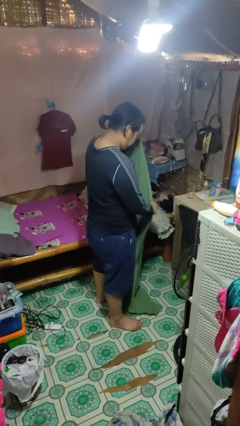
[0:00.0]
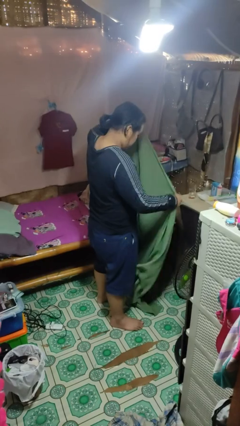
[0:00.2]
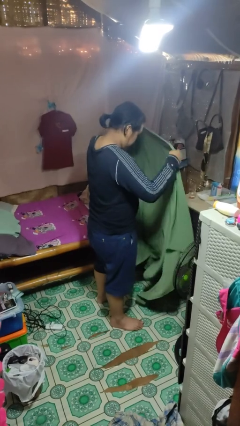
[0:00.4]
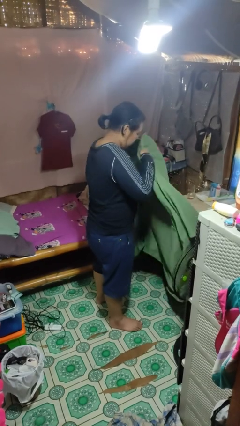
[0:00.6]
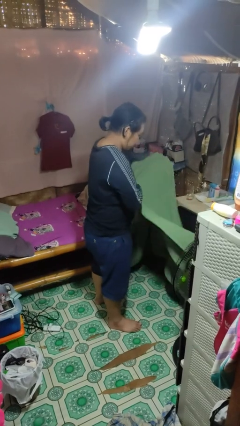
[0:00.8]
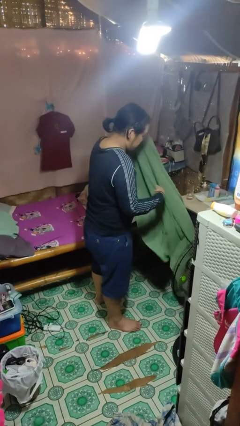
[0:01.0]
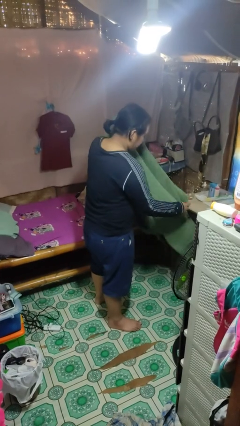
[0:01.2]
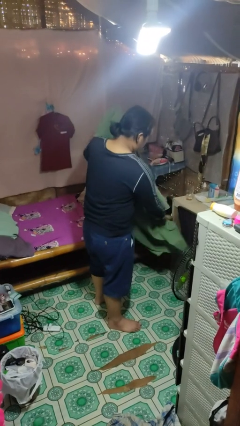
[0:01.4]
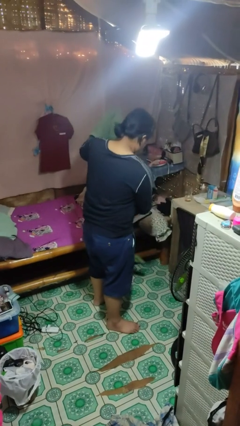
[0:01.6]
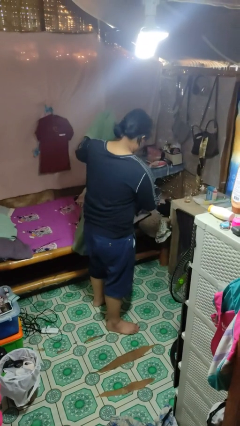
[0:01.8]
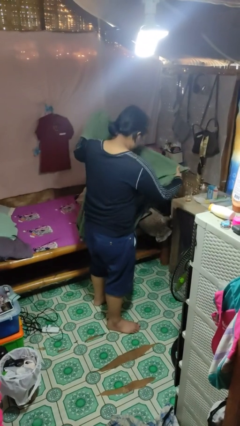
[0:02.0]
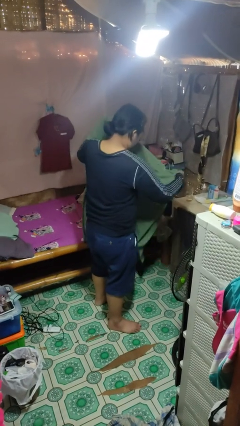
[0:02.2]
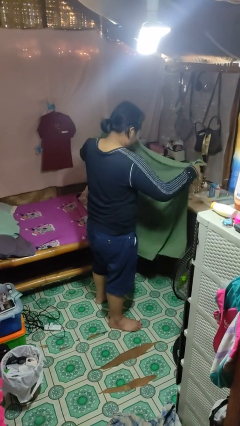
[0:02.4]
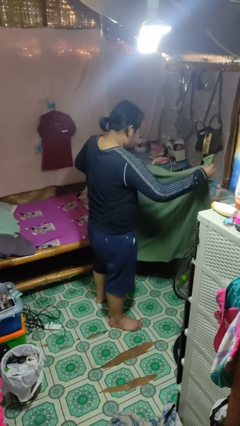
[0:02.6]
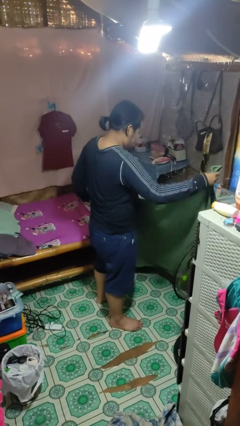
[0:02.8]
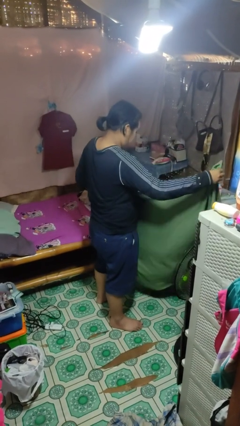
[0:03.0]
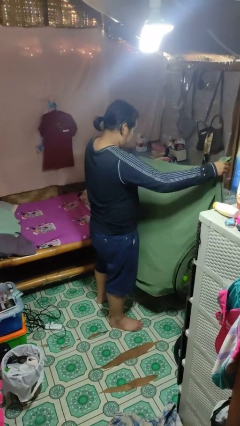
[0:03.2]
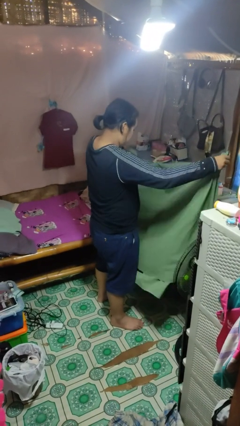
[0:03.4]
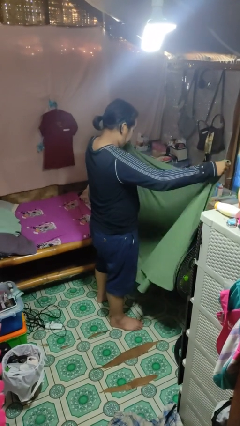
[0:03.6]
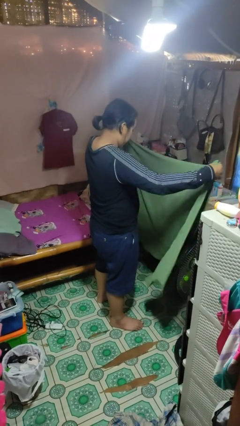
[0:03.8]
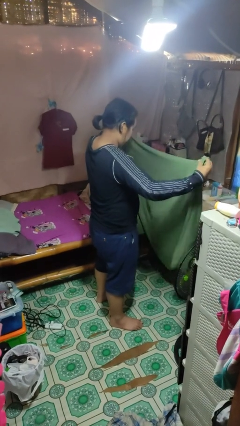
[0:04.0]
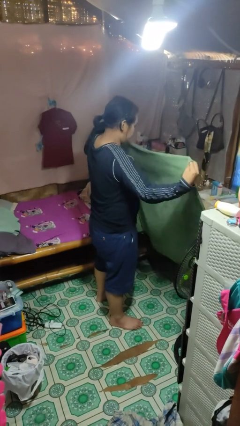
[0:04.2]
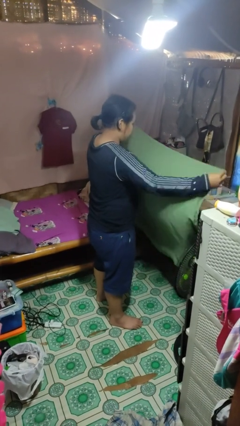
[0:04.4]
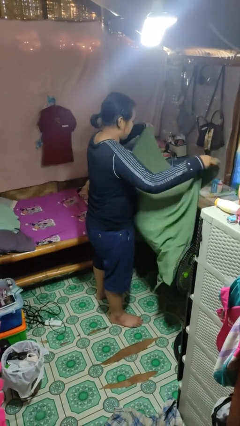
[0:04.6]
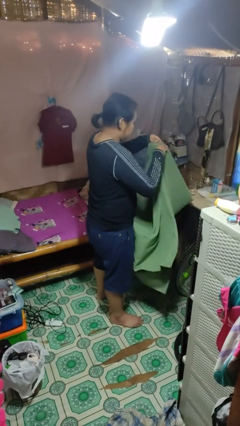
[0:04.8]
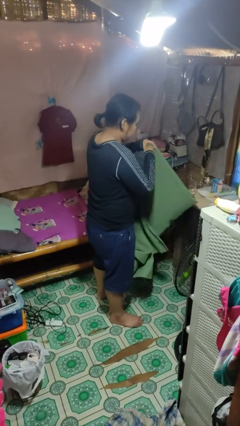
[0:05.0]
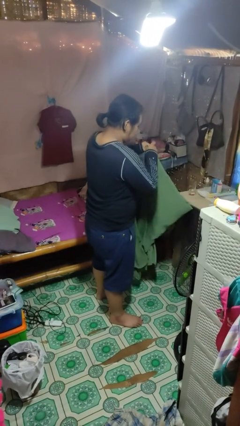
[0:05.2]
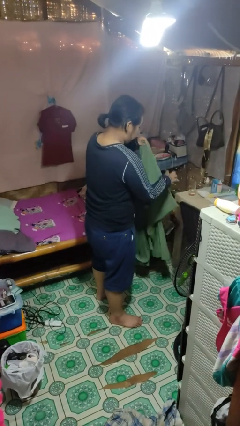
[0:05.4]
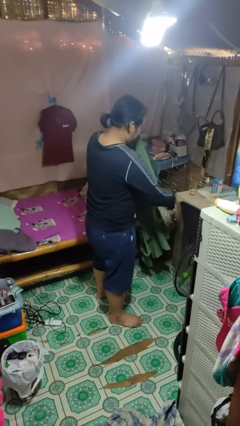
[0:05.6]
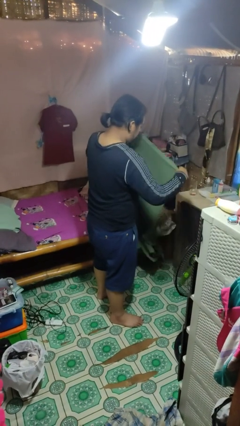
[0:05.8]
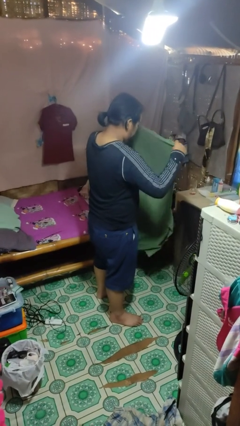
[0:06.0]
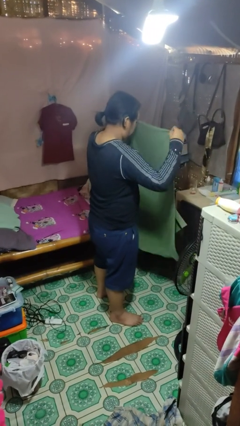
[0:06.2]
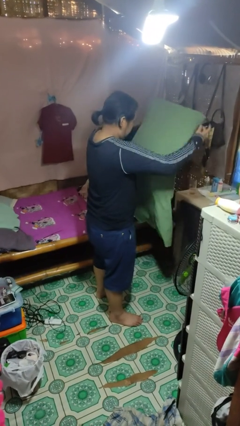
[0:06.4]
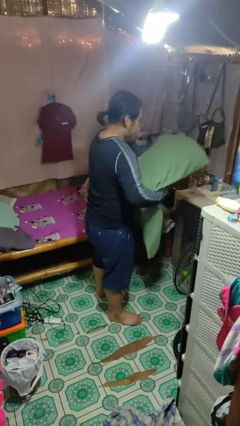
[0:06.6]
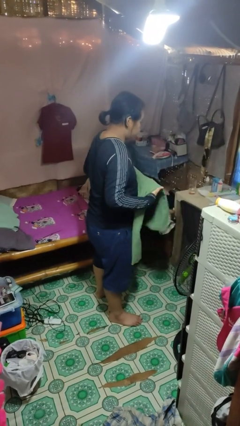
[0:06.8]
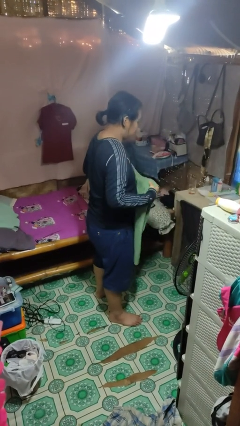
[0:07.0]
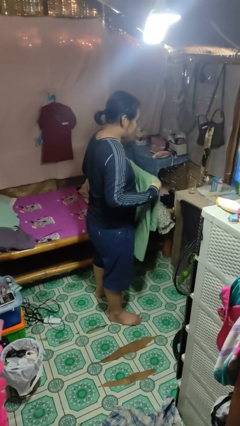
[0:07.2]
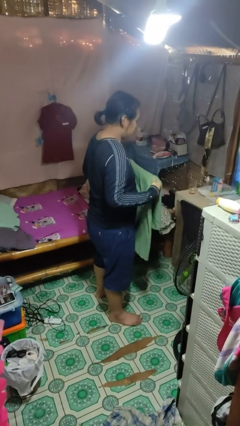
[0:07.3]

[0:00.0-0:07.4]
person folds blanket

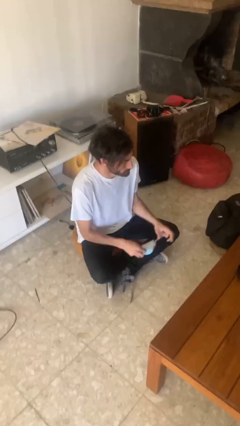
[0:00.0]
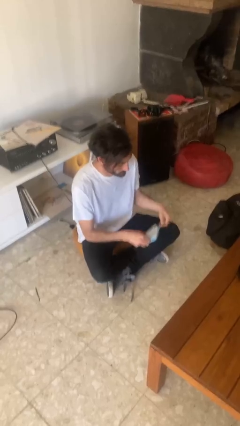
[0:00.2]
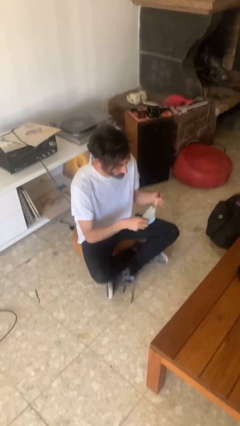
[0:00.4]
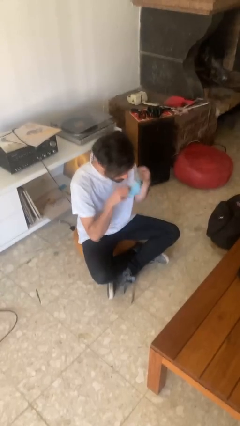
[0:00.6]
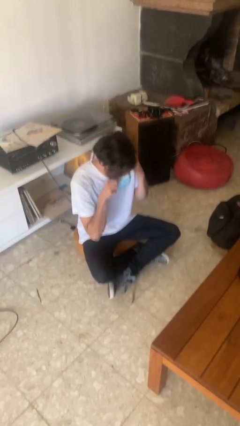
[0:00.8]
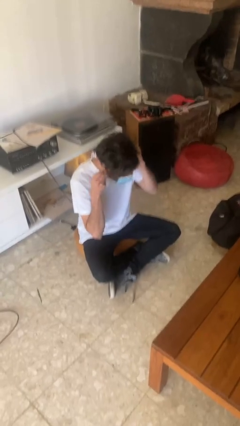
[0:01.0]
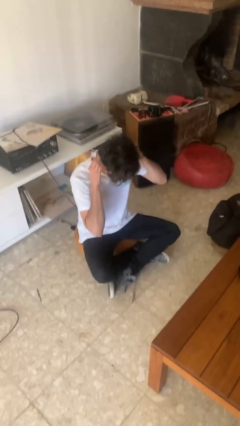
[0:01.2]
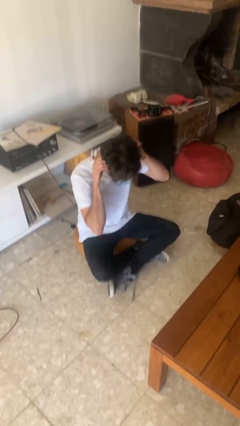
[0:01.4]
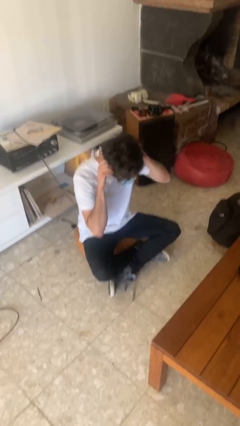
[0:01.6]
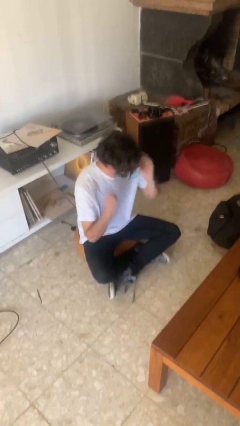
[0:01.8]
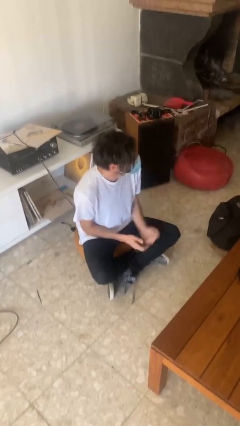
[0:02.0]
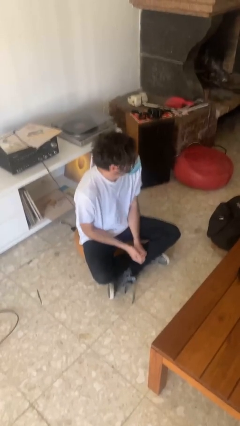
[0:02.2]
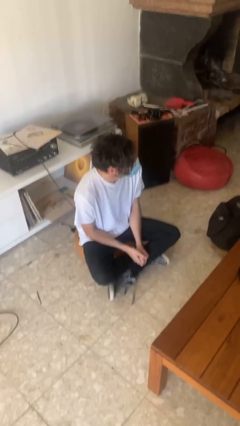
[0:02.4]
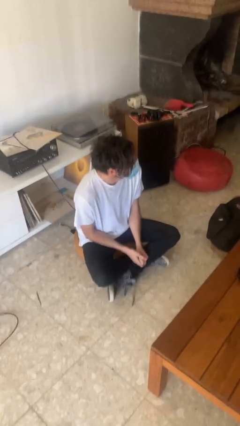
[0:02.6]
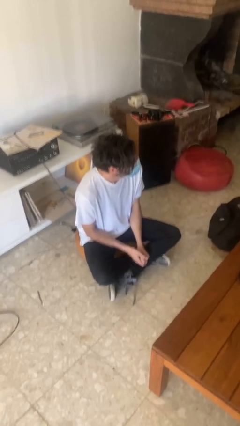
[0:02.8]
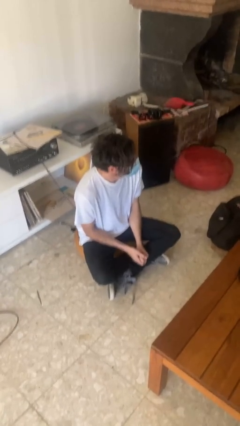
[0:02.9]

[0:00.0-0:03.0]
person puts on facemask

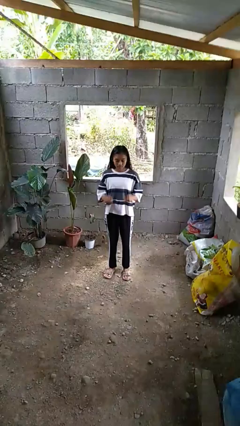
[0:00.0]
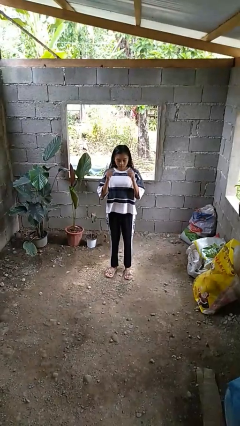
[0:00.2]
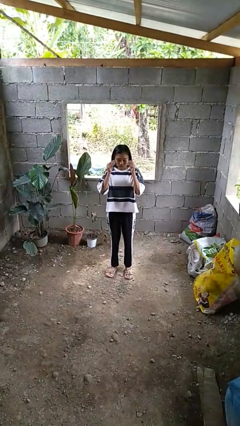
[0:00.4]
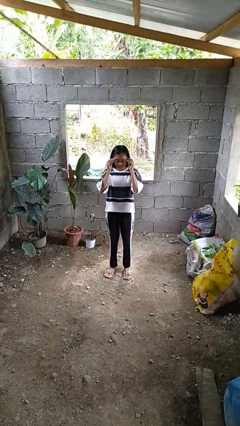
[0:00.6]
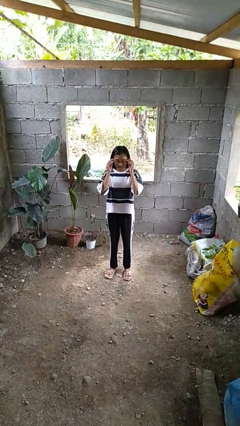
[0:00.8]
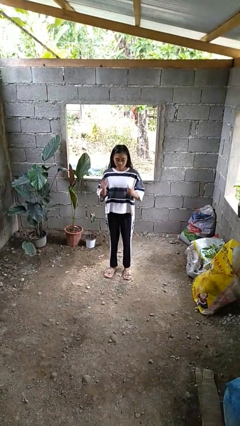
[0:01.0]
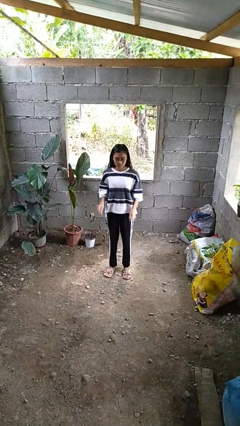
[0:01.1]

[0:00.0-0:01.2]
person puts on glasses

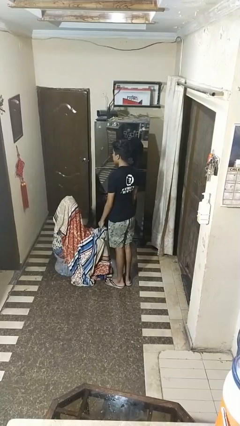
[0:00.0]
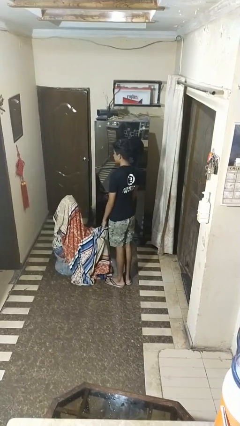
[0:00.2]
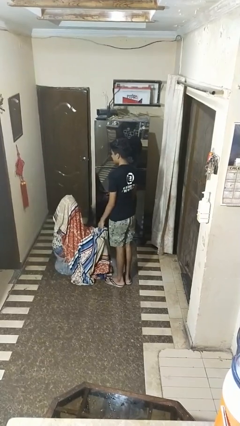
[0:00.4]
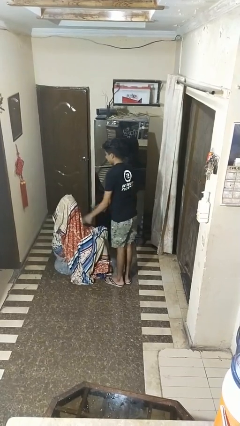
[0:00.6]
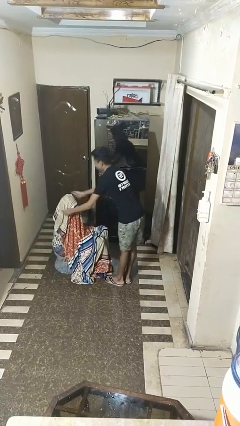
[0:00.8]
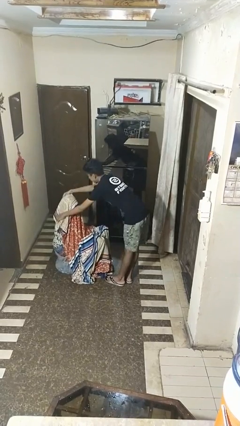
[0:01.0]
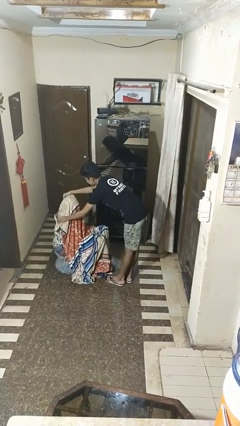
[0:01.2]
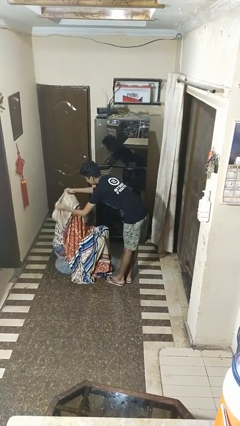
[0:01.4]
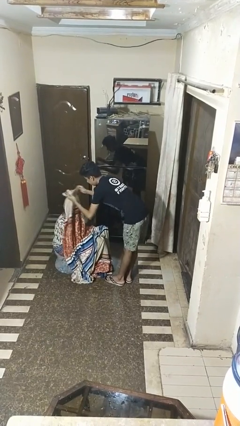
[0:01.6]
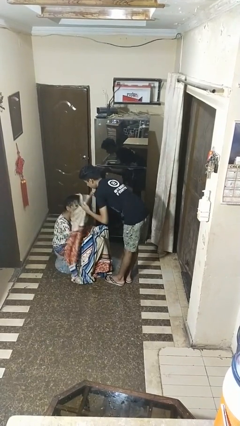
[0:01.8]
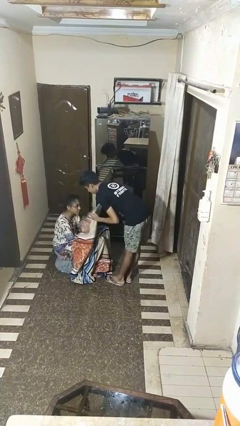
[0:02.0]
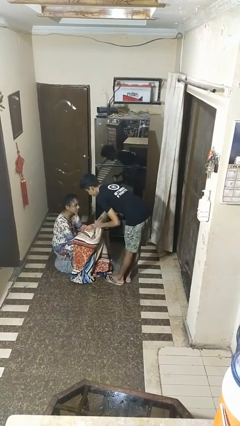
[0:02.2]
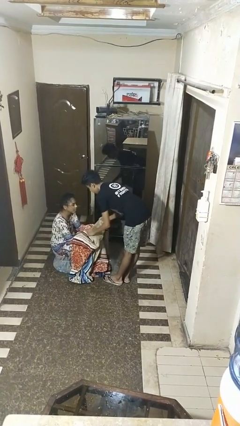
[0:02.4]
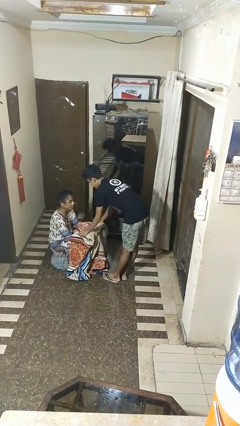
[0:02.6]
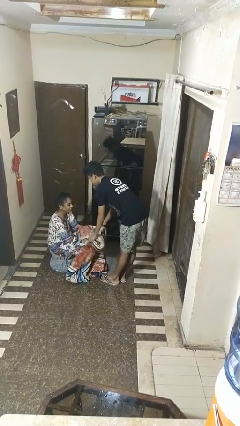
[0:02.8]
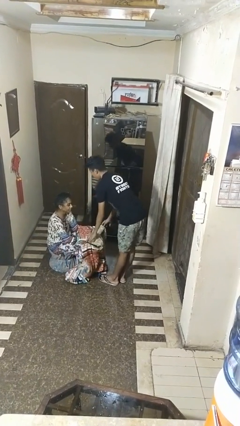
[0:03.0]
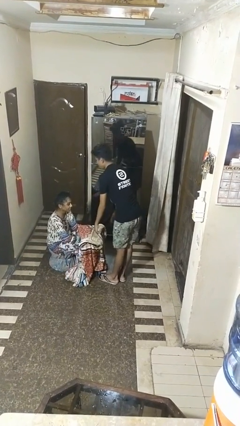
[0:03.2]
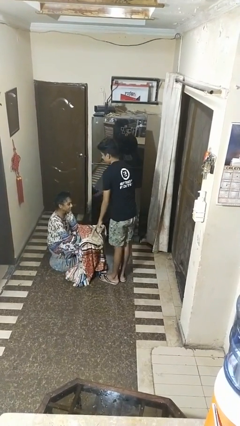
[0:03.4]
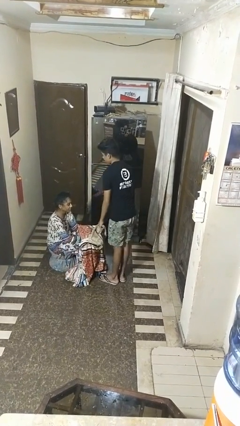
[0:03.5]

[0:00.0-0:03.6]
person uncovers friend with blanket

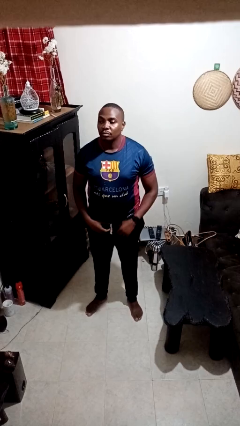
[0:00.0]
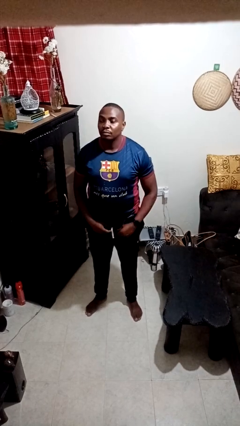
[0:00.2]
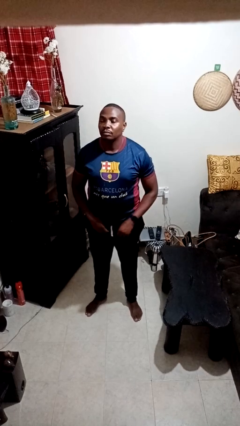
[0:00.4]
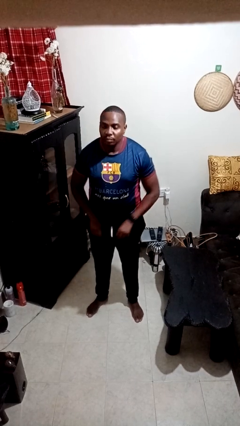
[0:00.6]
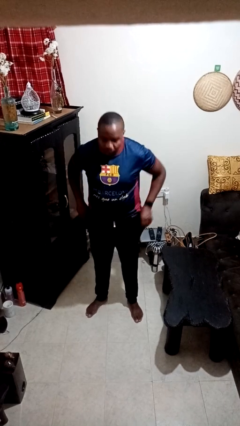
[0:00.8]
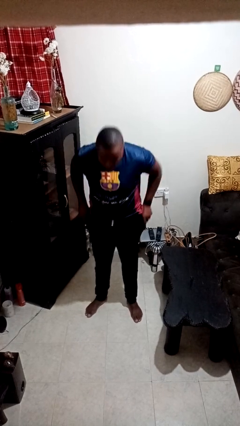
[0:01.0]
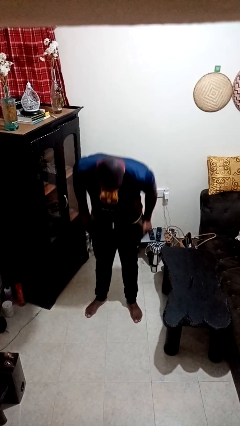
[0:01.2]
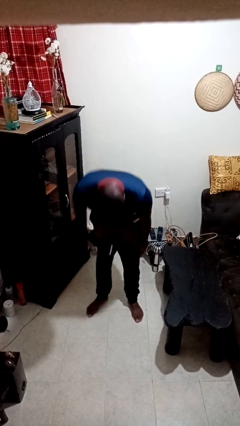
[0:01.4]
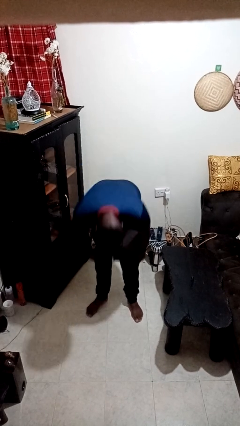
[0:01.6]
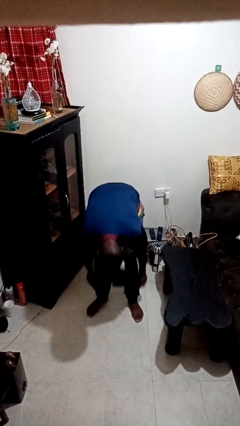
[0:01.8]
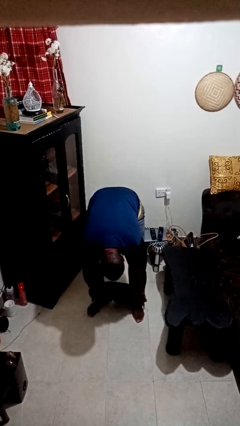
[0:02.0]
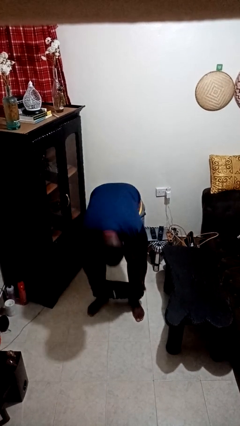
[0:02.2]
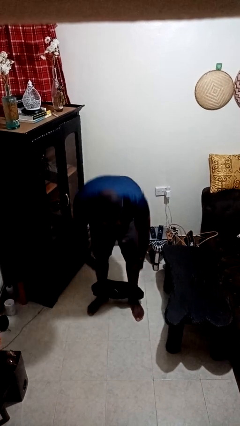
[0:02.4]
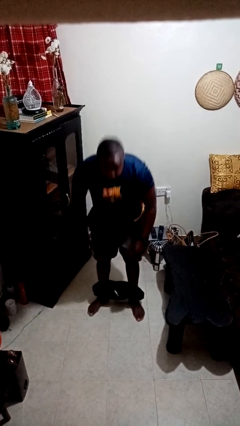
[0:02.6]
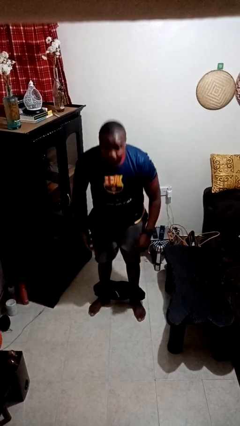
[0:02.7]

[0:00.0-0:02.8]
person takes off pants
